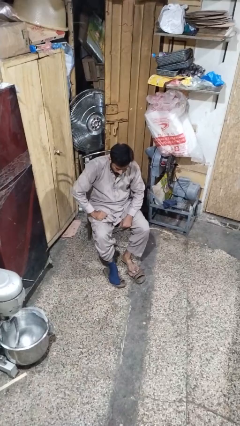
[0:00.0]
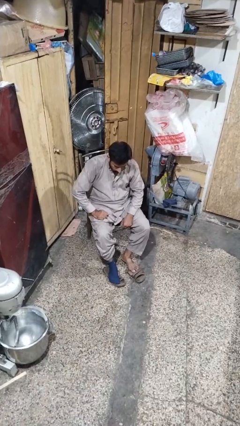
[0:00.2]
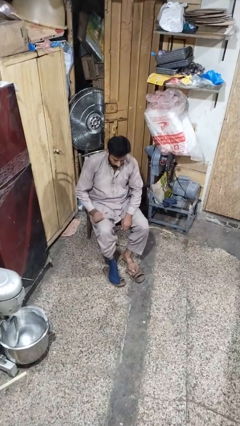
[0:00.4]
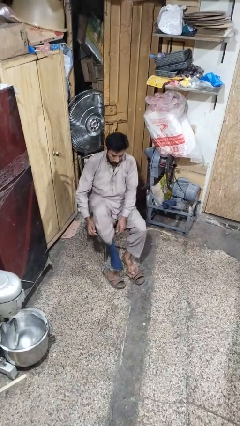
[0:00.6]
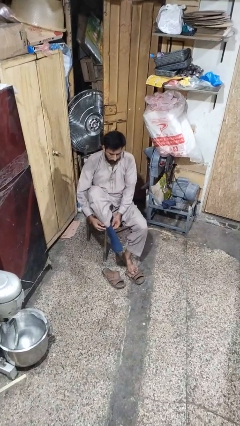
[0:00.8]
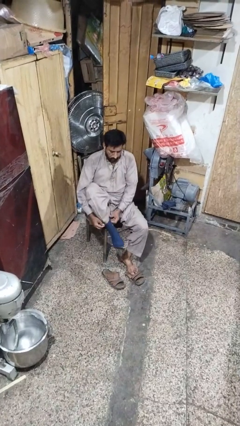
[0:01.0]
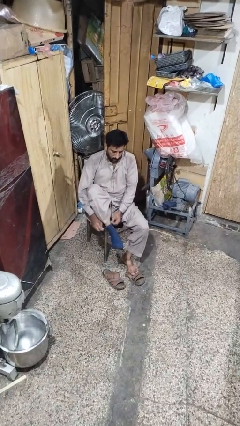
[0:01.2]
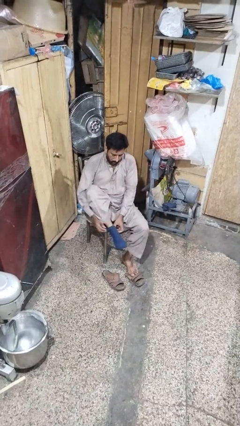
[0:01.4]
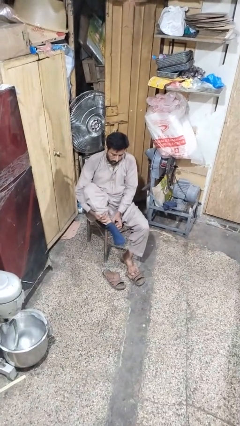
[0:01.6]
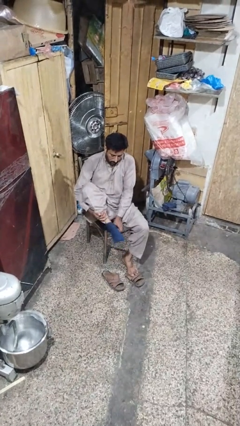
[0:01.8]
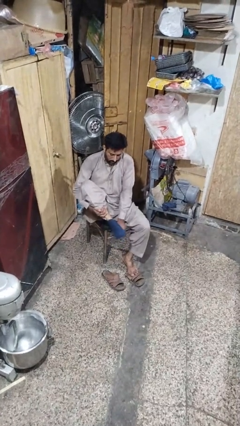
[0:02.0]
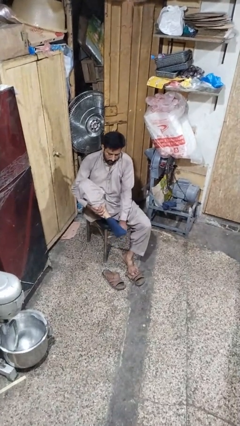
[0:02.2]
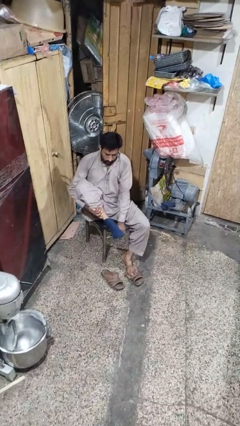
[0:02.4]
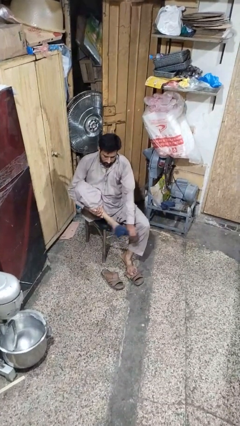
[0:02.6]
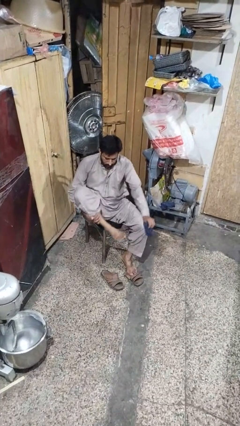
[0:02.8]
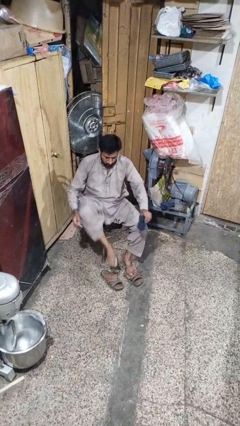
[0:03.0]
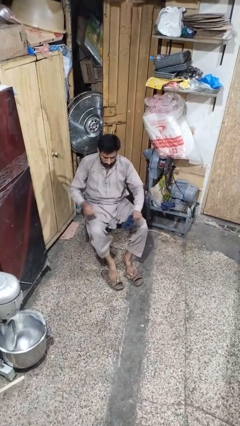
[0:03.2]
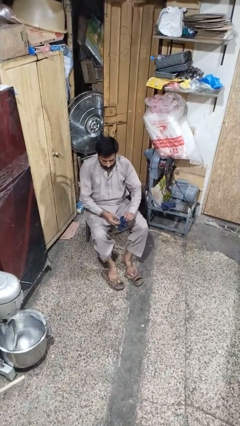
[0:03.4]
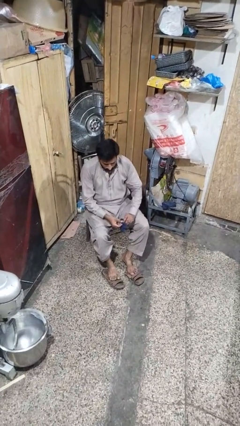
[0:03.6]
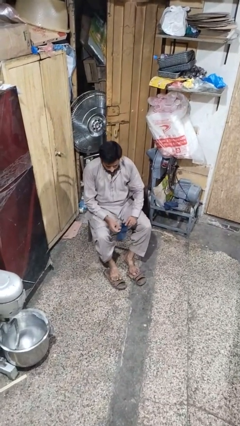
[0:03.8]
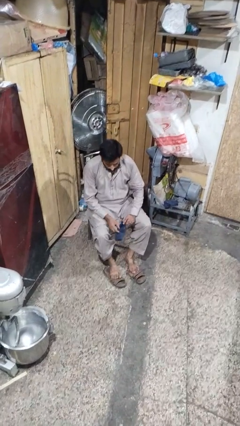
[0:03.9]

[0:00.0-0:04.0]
person takes off socks

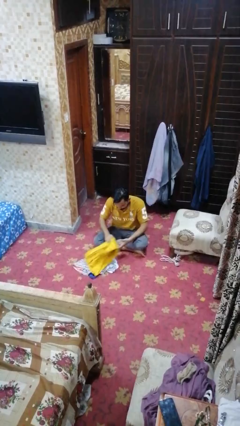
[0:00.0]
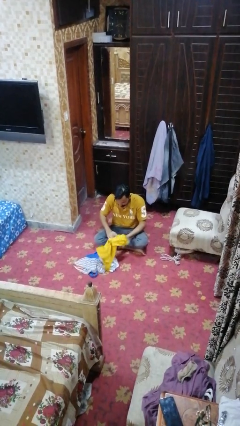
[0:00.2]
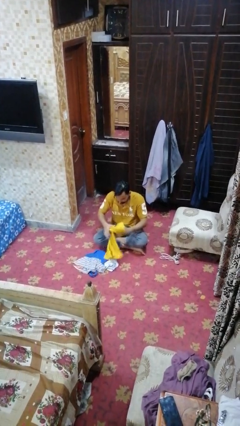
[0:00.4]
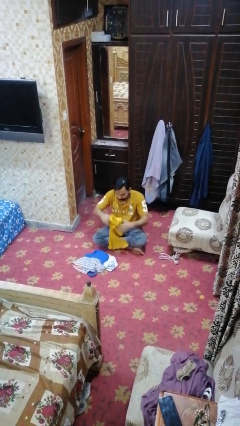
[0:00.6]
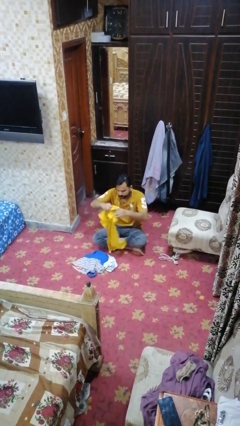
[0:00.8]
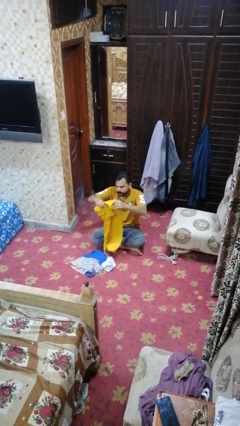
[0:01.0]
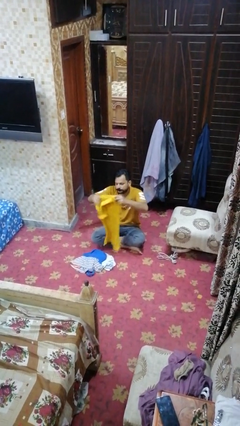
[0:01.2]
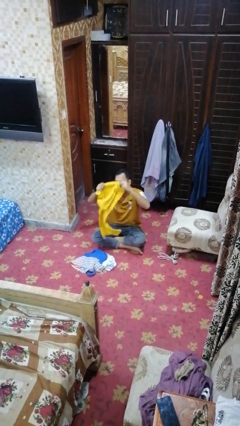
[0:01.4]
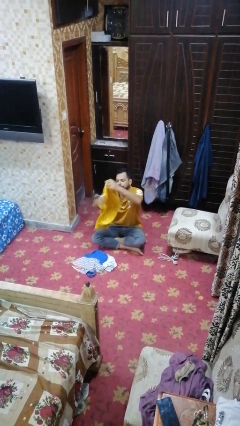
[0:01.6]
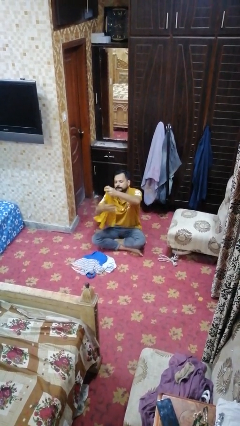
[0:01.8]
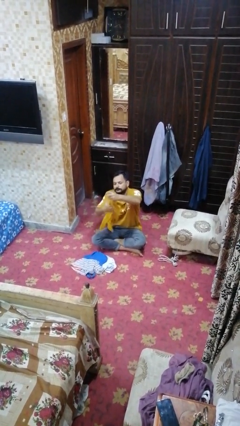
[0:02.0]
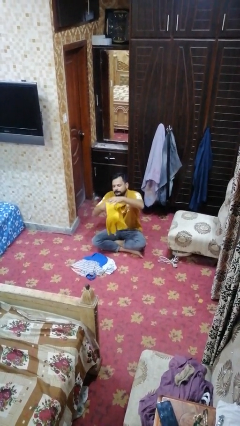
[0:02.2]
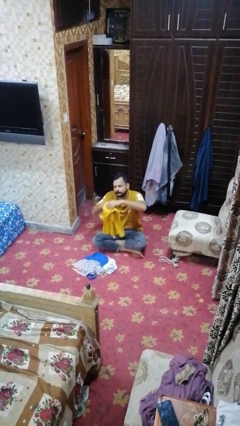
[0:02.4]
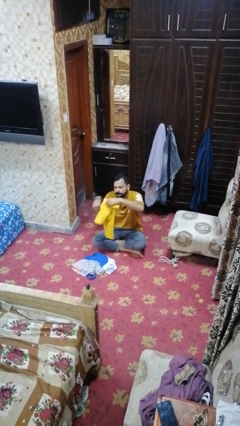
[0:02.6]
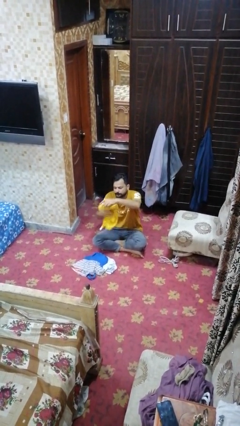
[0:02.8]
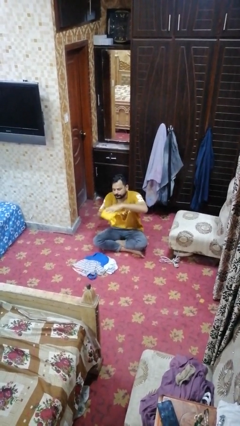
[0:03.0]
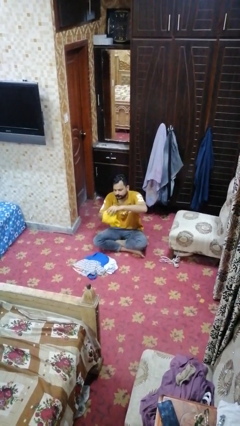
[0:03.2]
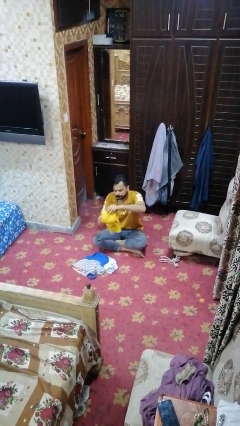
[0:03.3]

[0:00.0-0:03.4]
person folds shirt

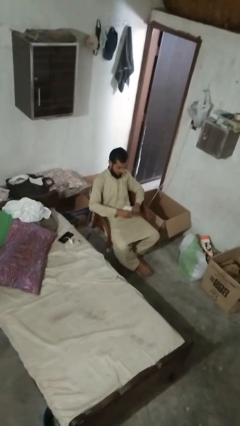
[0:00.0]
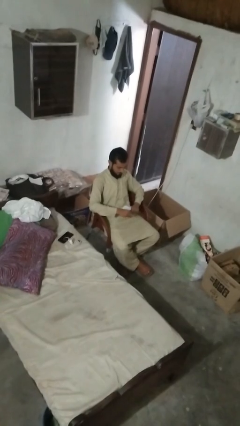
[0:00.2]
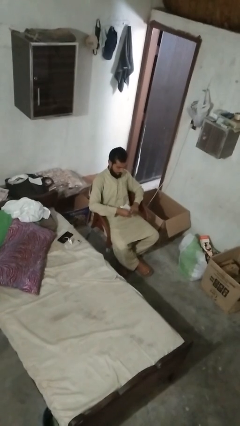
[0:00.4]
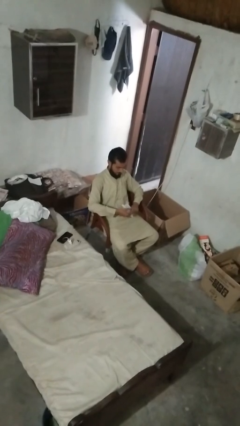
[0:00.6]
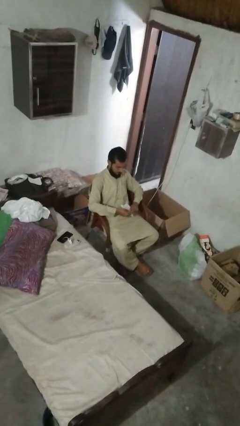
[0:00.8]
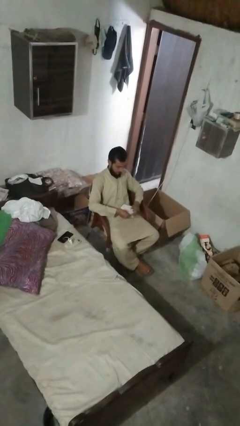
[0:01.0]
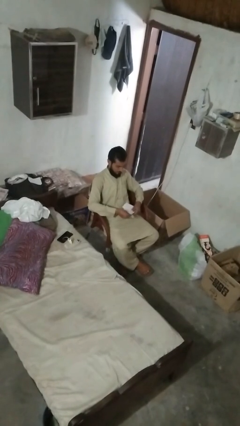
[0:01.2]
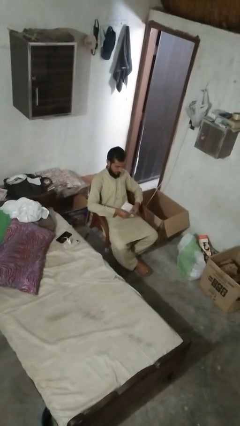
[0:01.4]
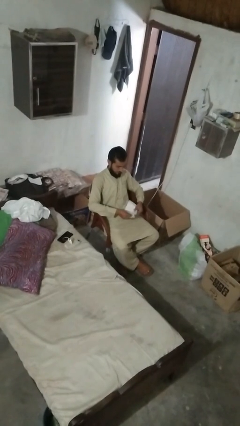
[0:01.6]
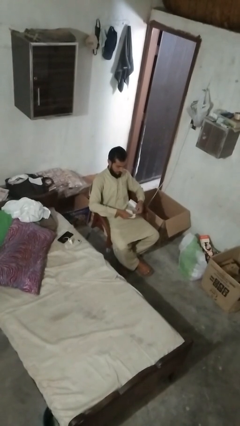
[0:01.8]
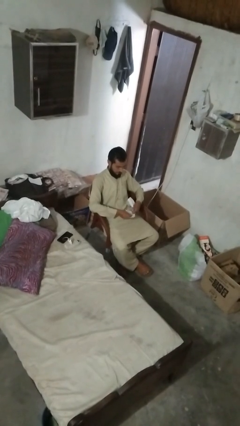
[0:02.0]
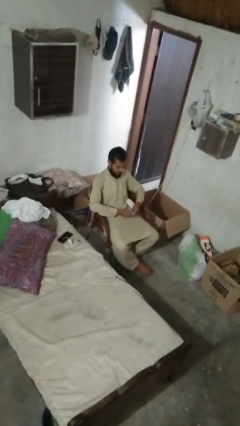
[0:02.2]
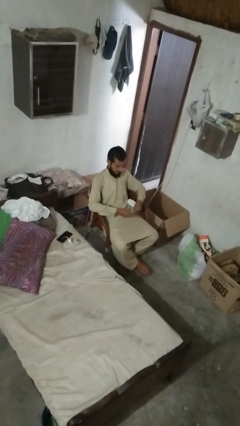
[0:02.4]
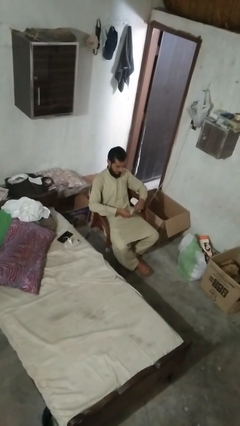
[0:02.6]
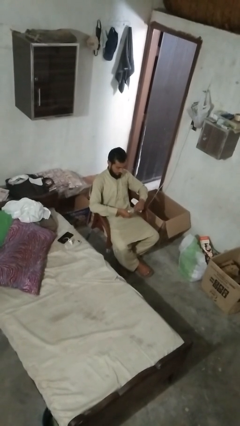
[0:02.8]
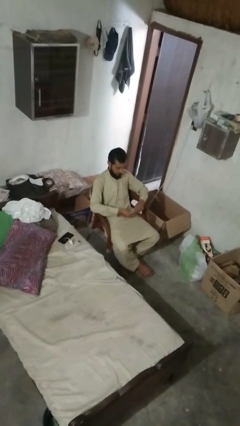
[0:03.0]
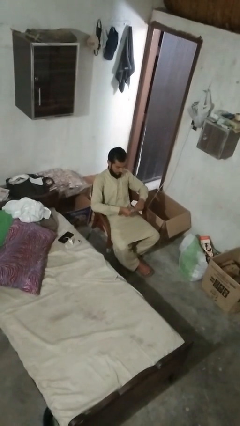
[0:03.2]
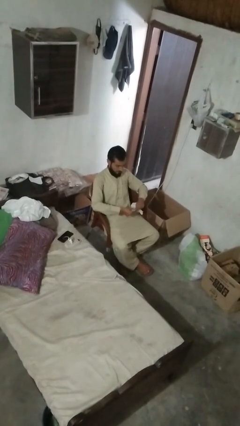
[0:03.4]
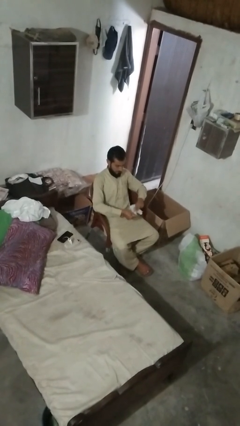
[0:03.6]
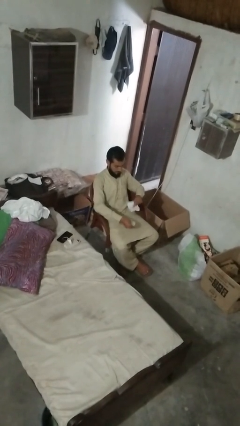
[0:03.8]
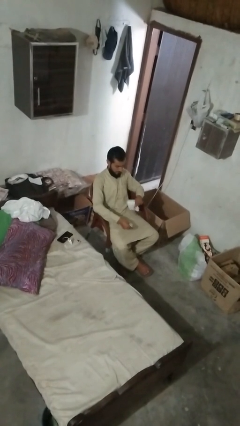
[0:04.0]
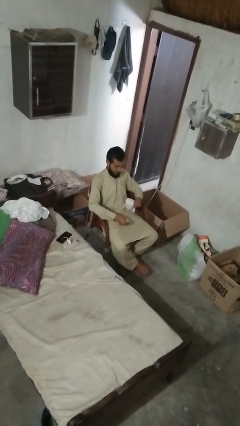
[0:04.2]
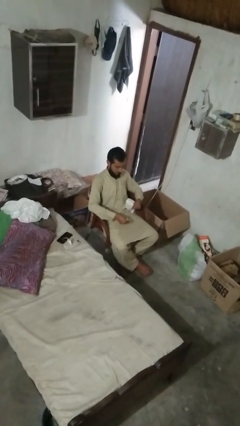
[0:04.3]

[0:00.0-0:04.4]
person tears paper

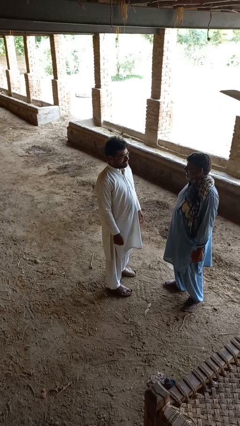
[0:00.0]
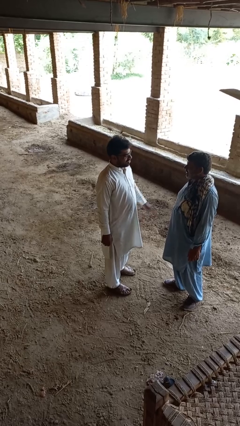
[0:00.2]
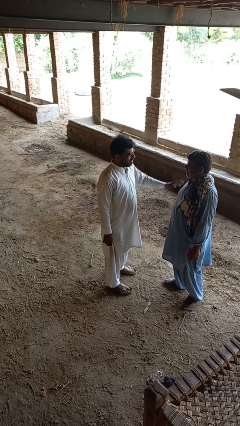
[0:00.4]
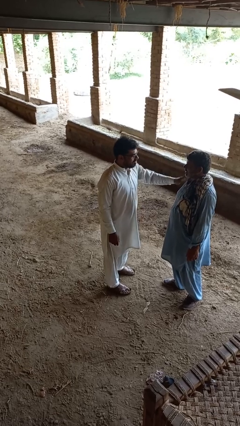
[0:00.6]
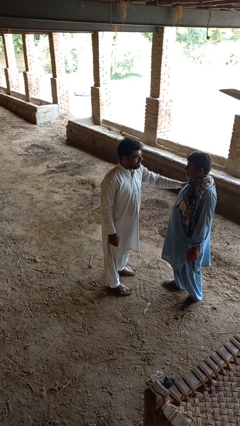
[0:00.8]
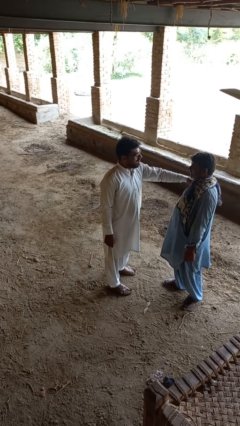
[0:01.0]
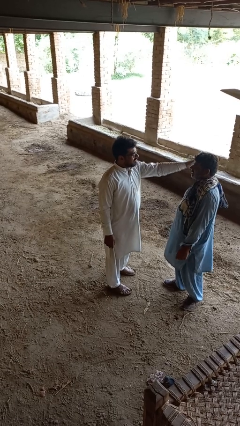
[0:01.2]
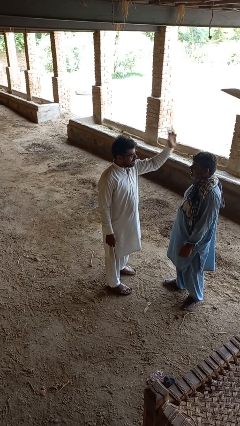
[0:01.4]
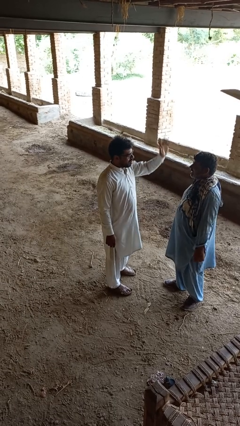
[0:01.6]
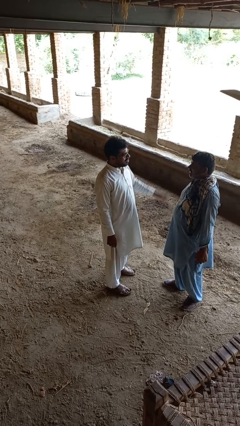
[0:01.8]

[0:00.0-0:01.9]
person shoves person

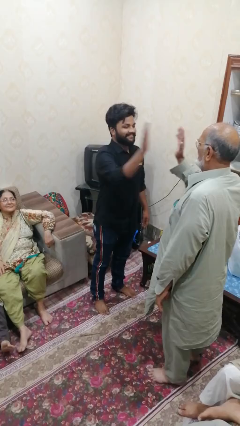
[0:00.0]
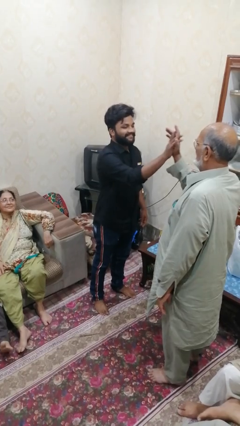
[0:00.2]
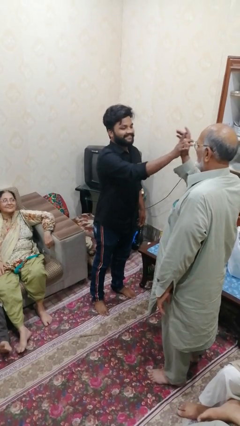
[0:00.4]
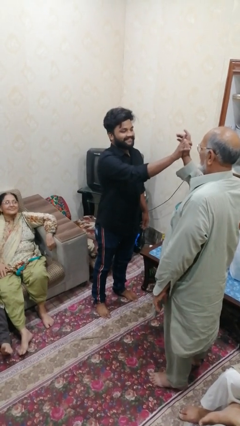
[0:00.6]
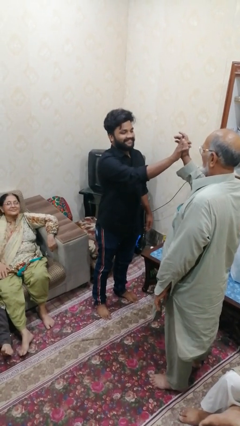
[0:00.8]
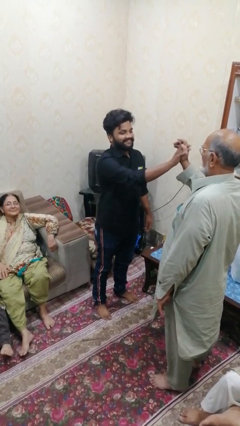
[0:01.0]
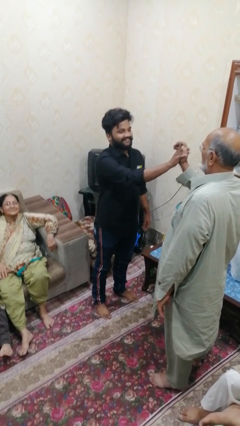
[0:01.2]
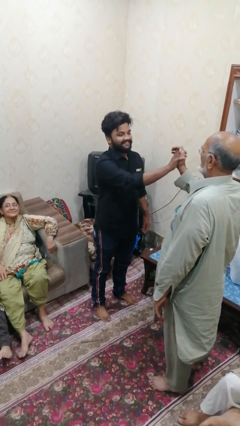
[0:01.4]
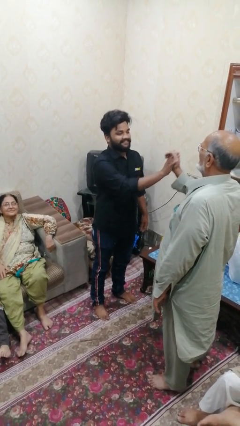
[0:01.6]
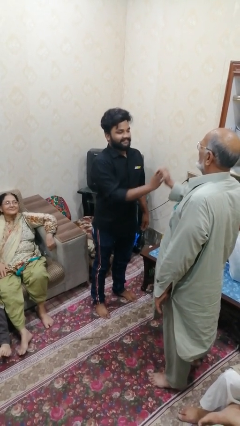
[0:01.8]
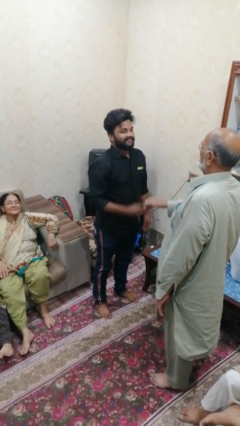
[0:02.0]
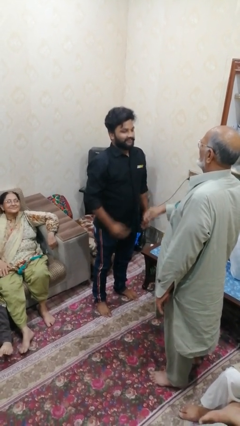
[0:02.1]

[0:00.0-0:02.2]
person highfives hand

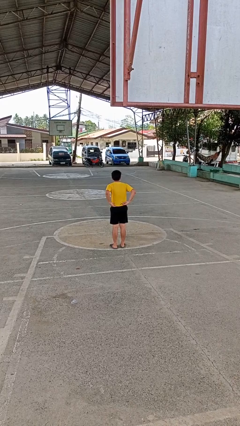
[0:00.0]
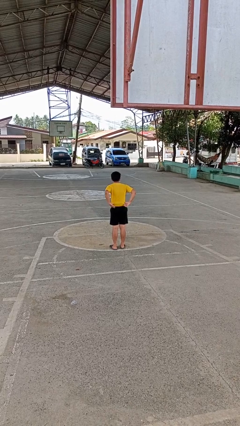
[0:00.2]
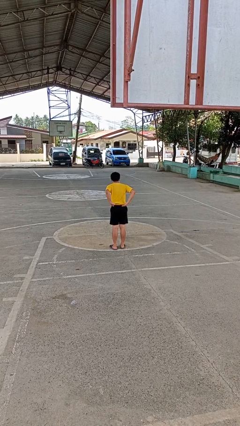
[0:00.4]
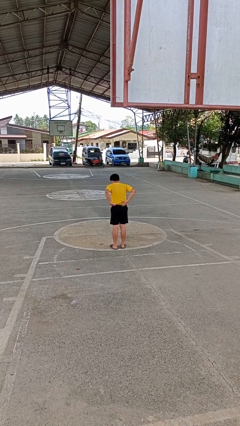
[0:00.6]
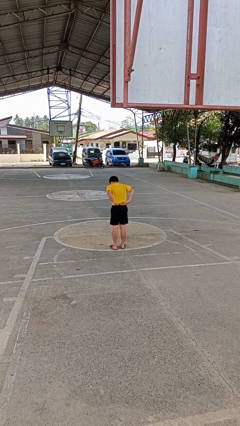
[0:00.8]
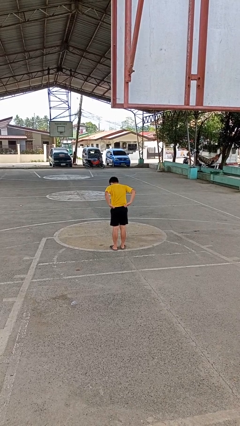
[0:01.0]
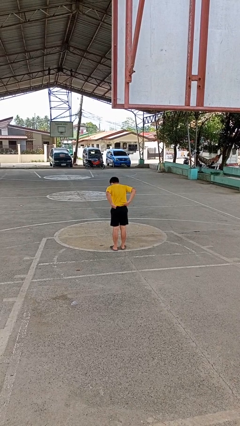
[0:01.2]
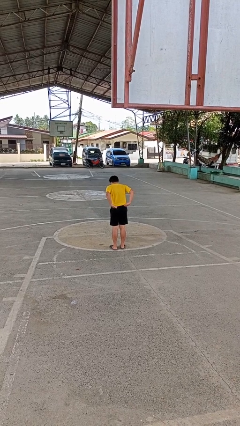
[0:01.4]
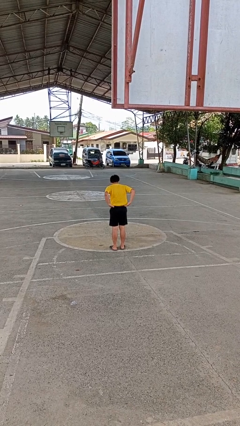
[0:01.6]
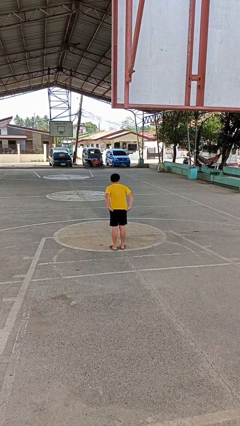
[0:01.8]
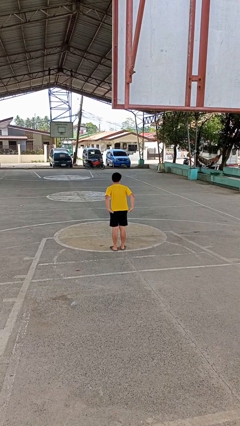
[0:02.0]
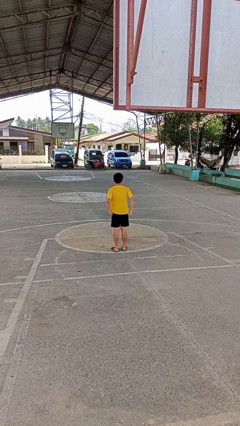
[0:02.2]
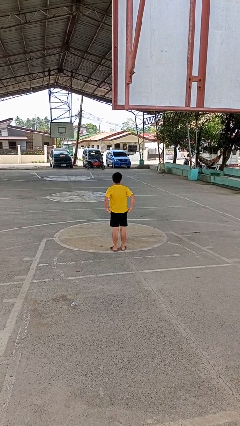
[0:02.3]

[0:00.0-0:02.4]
person untucks shirt
